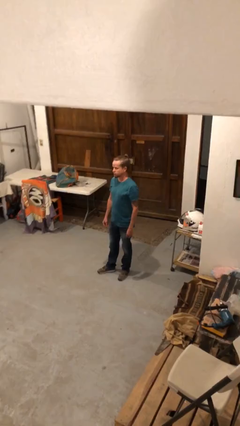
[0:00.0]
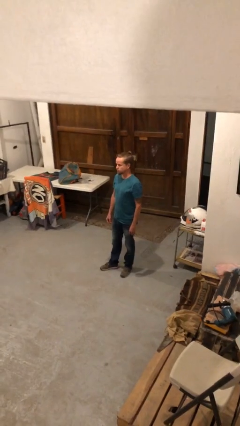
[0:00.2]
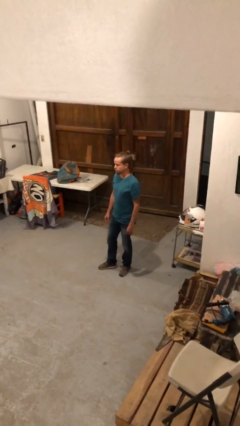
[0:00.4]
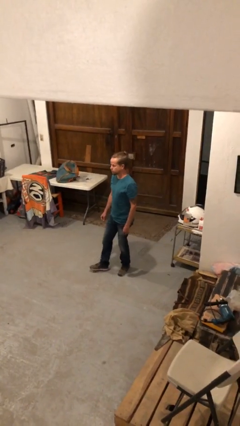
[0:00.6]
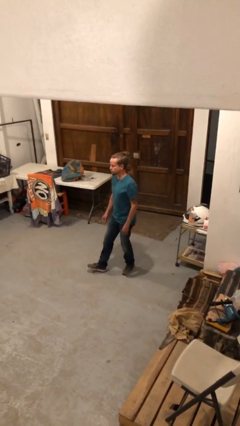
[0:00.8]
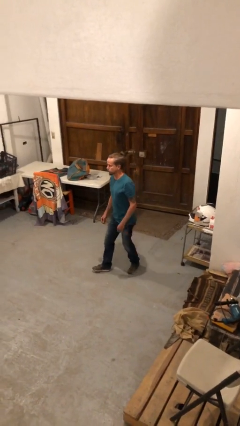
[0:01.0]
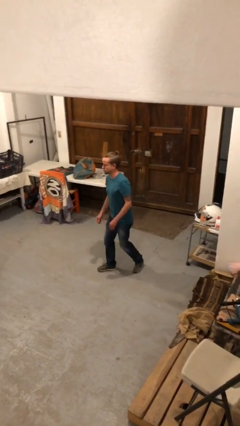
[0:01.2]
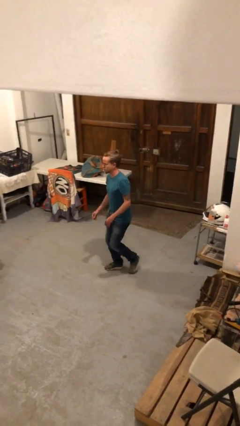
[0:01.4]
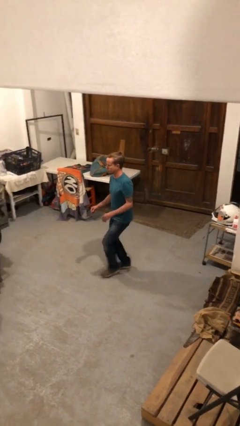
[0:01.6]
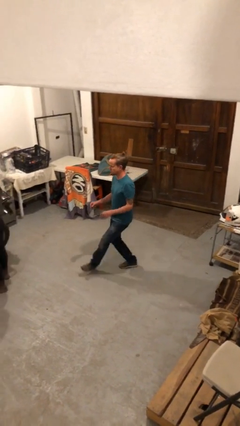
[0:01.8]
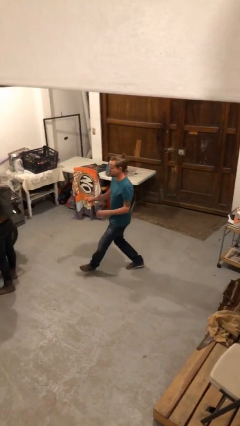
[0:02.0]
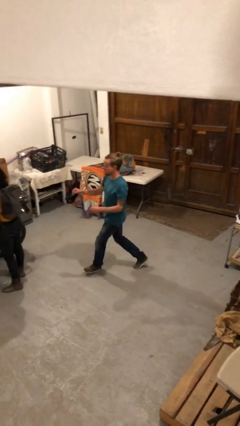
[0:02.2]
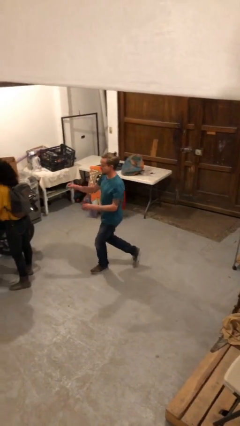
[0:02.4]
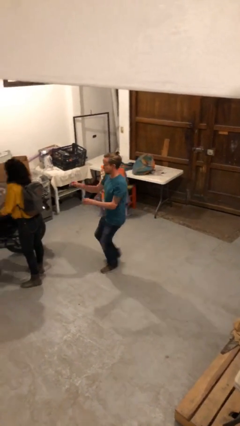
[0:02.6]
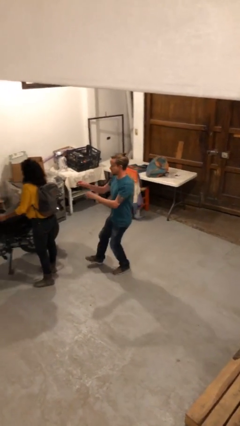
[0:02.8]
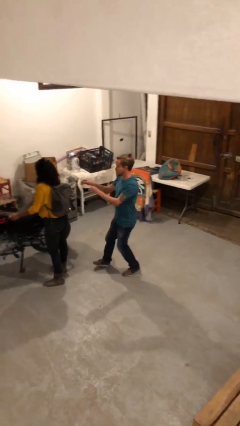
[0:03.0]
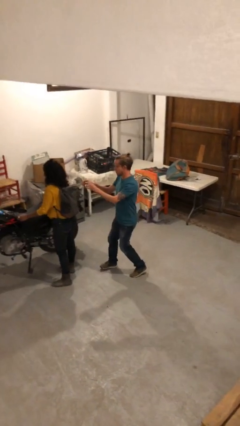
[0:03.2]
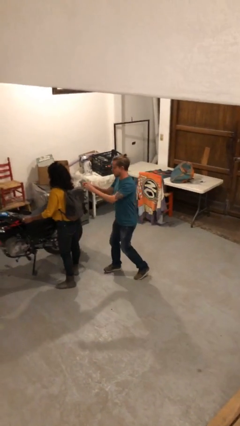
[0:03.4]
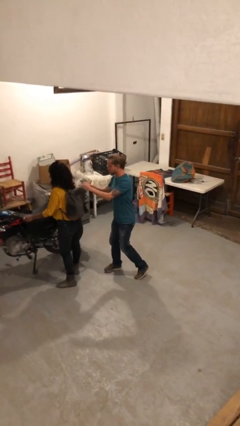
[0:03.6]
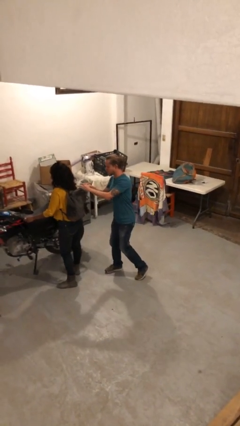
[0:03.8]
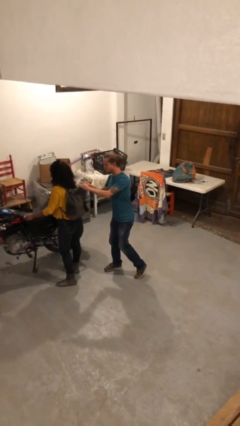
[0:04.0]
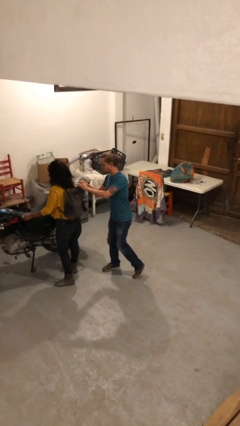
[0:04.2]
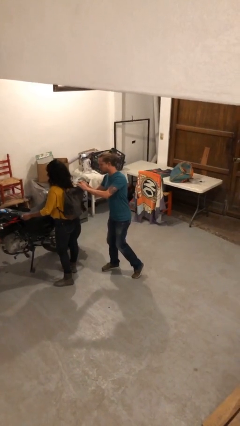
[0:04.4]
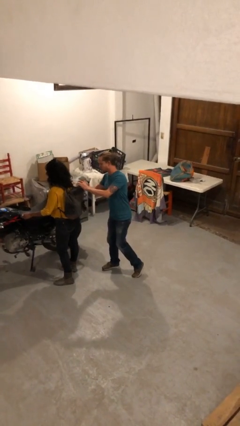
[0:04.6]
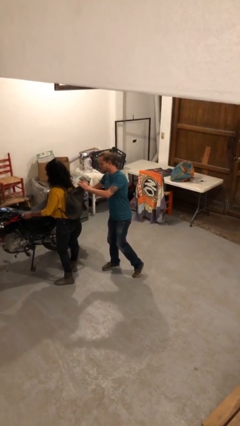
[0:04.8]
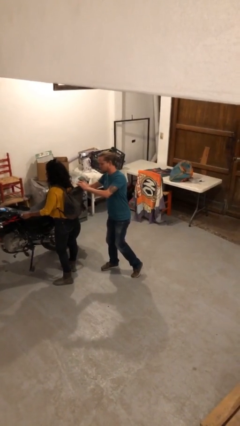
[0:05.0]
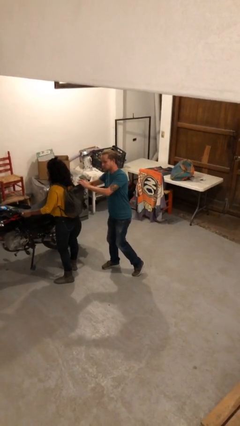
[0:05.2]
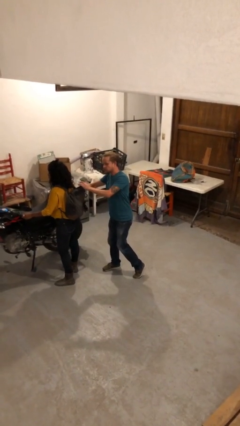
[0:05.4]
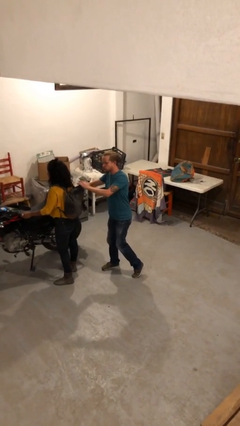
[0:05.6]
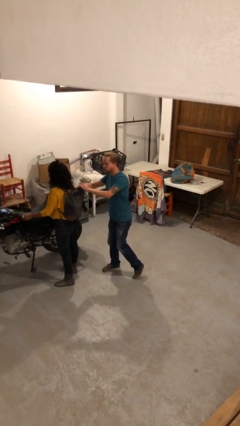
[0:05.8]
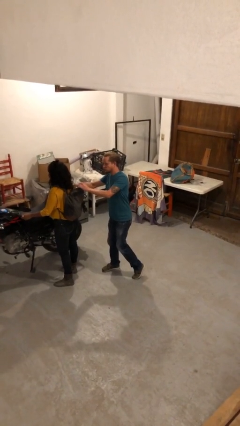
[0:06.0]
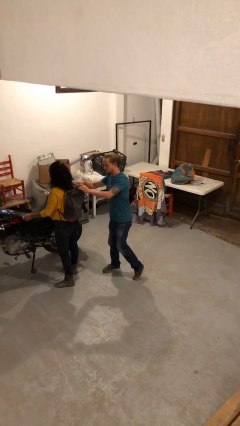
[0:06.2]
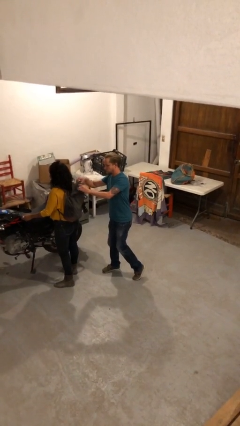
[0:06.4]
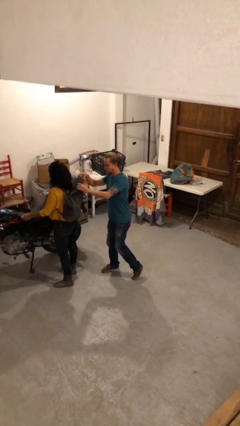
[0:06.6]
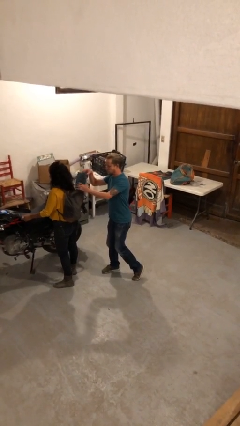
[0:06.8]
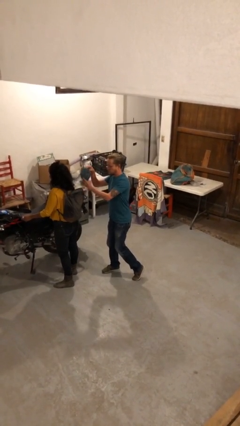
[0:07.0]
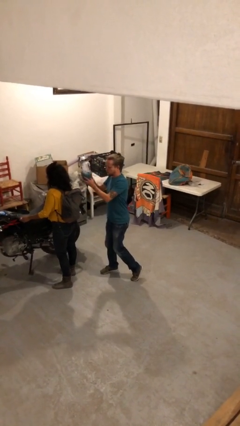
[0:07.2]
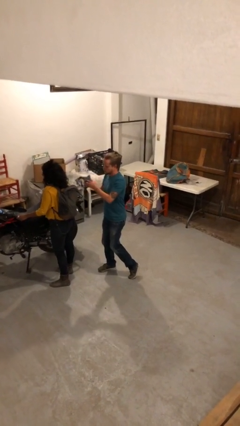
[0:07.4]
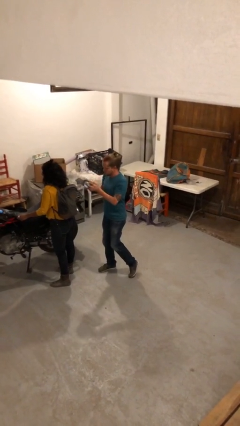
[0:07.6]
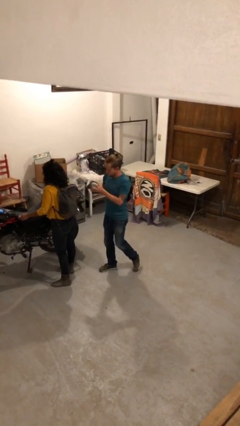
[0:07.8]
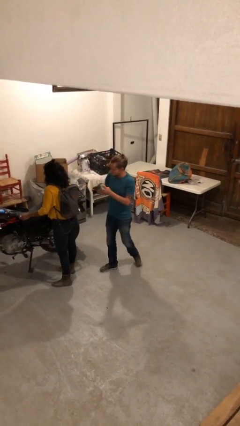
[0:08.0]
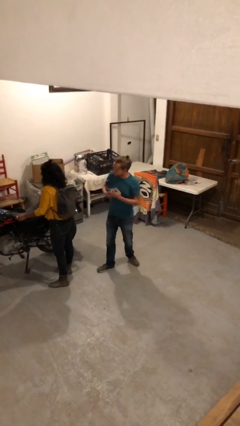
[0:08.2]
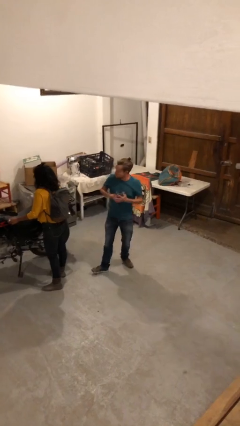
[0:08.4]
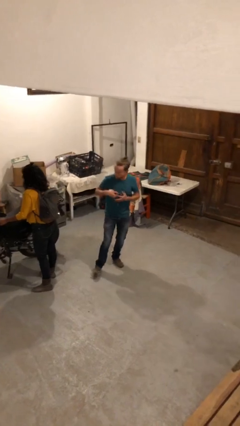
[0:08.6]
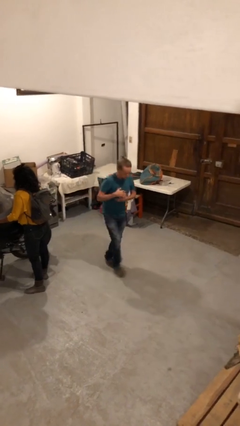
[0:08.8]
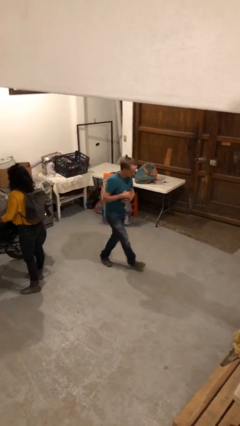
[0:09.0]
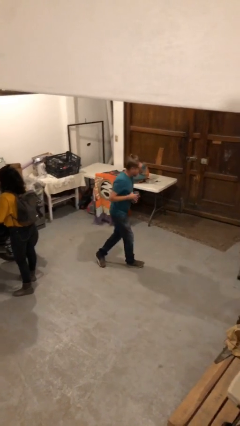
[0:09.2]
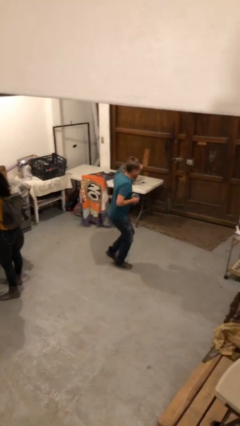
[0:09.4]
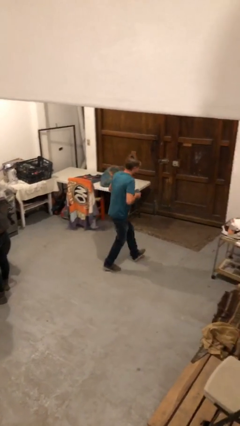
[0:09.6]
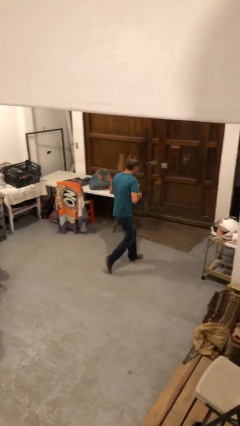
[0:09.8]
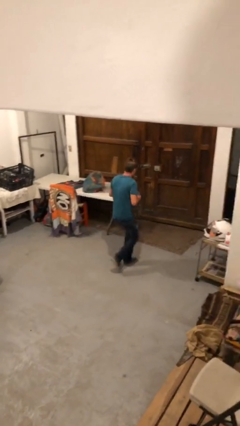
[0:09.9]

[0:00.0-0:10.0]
person steals object from person

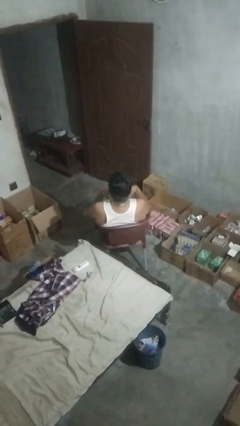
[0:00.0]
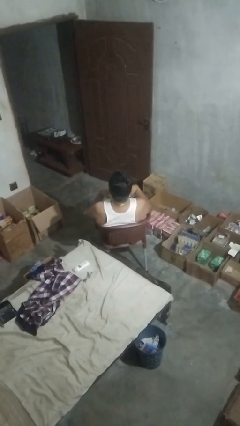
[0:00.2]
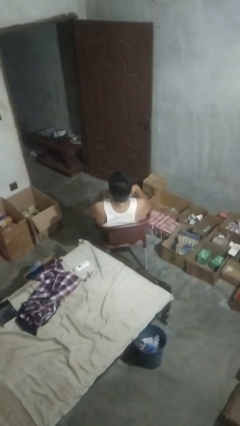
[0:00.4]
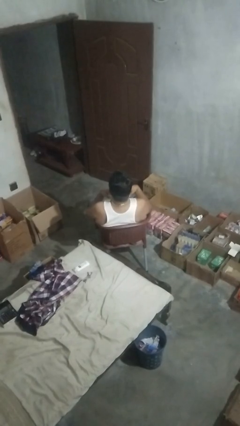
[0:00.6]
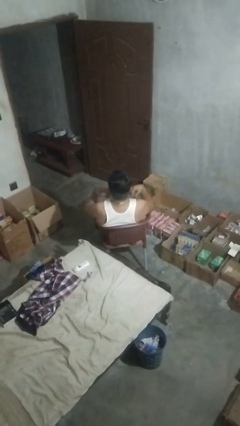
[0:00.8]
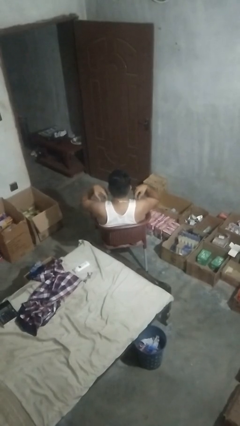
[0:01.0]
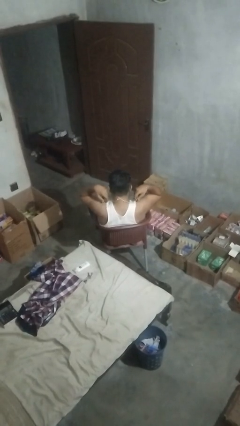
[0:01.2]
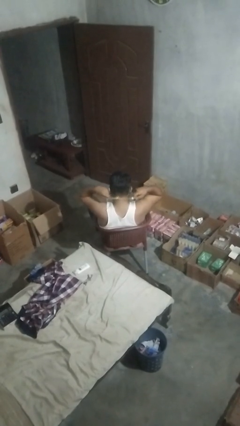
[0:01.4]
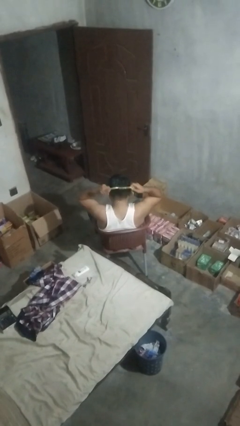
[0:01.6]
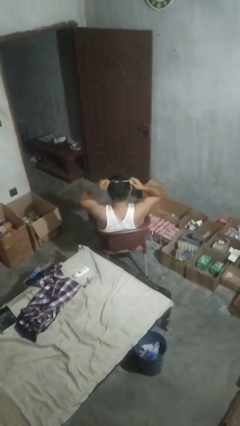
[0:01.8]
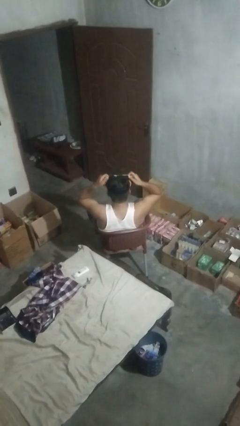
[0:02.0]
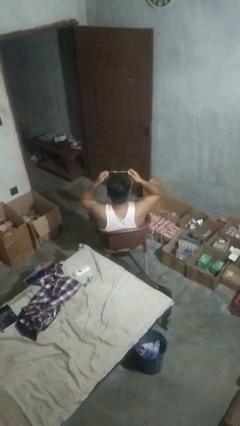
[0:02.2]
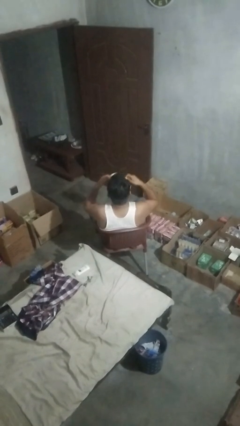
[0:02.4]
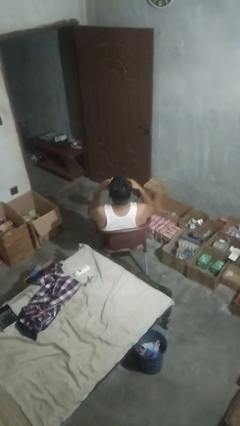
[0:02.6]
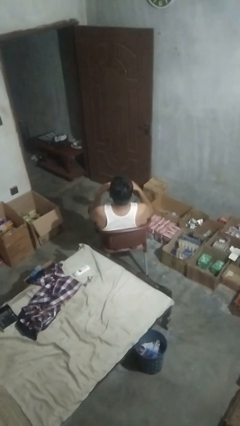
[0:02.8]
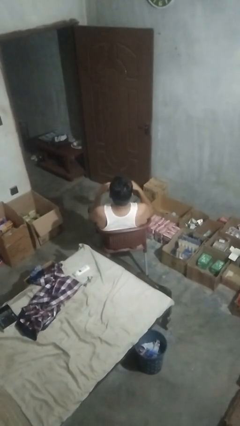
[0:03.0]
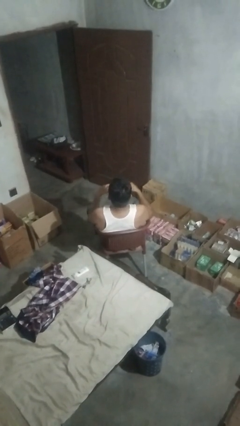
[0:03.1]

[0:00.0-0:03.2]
person takes off necklace

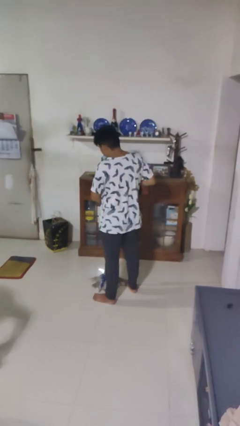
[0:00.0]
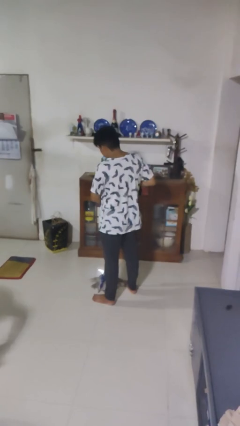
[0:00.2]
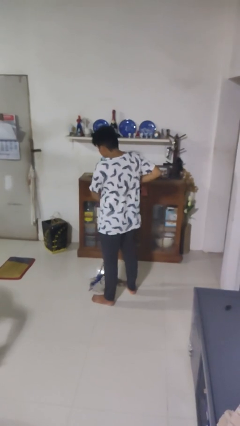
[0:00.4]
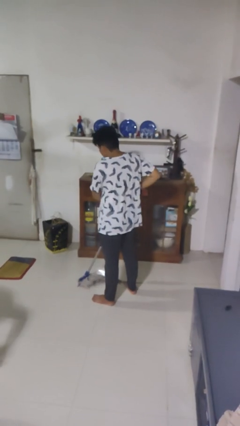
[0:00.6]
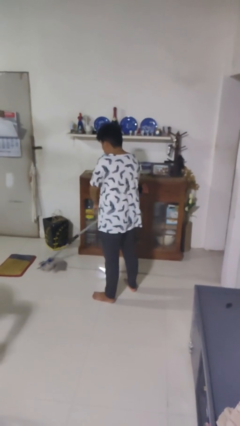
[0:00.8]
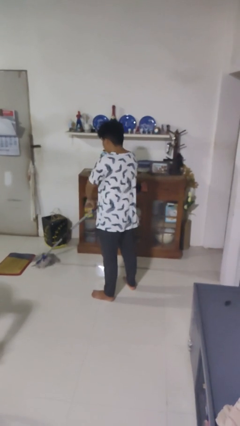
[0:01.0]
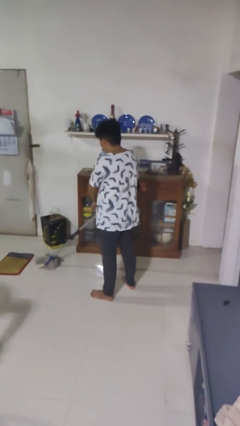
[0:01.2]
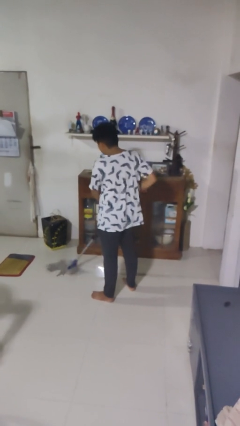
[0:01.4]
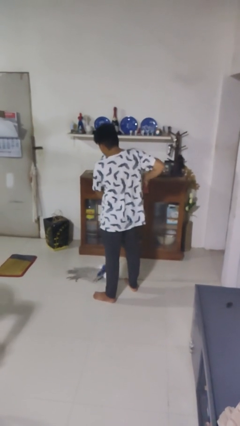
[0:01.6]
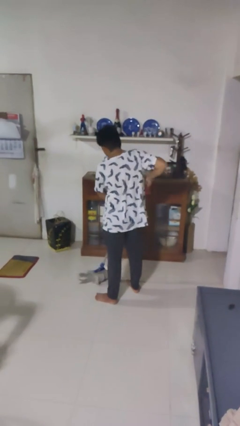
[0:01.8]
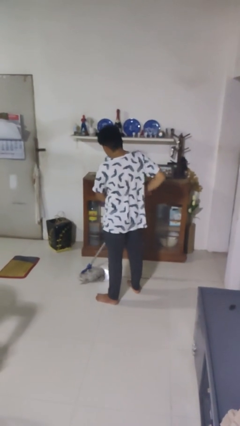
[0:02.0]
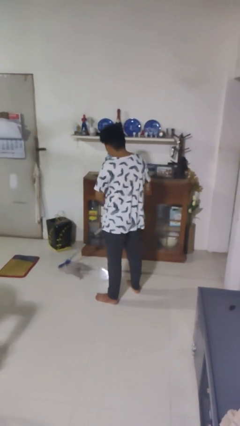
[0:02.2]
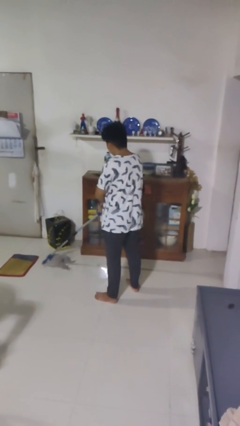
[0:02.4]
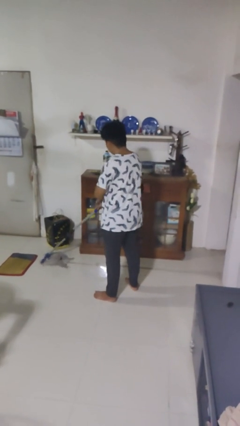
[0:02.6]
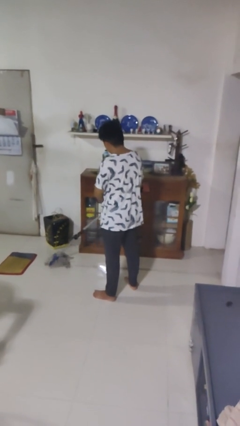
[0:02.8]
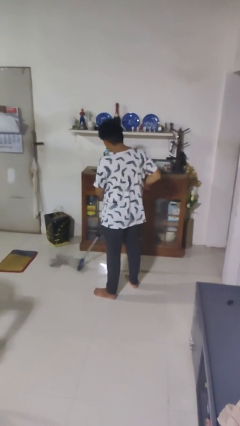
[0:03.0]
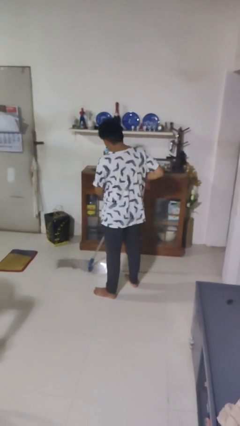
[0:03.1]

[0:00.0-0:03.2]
person mops

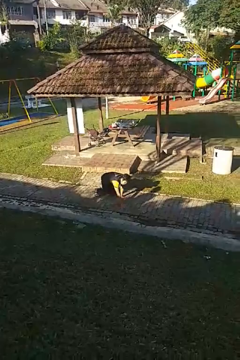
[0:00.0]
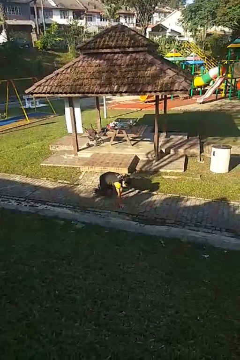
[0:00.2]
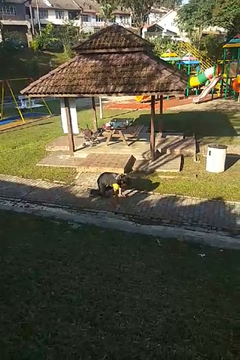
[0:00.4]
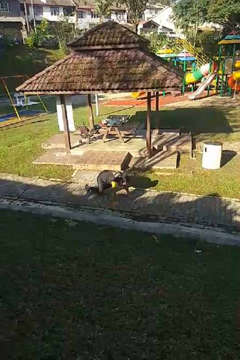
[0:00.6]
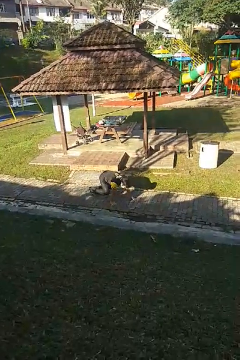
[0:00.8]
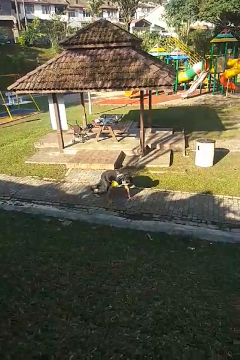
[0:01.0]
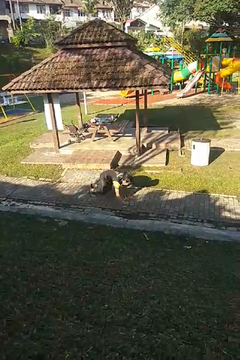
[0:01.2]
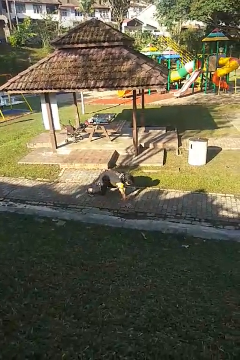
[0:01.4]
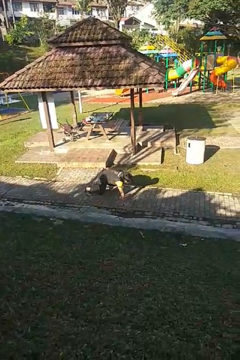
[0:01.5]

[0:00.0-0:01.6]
person crawls

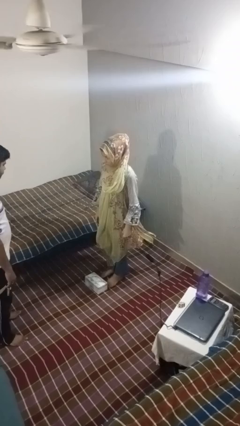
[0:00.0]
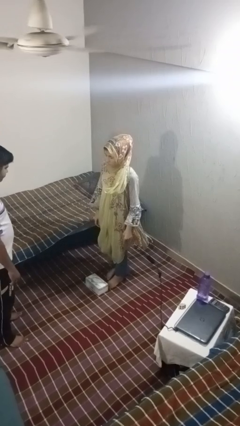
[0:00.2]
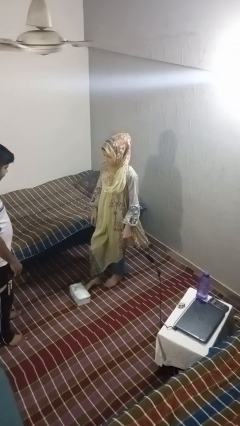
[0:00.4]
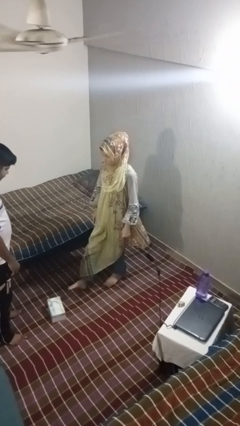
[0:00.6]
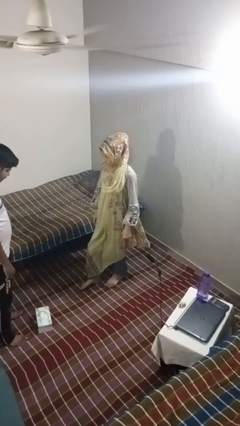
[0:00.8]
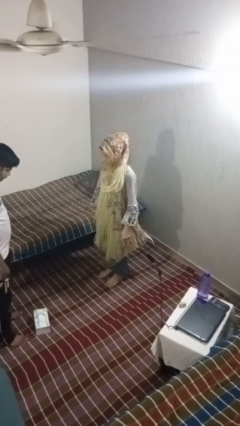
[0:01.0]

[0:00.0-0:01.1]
person kicks object to person